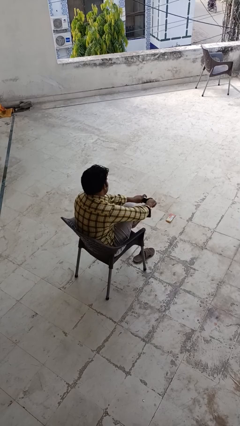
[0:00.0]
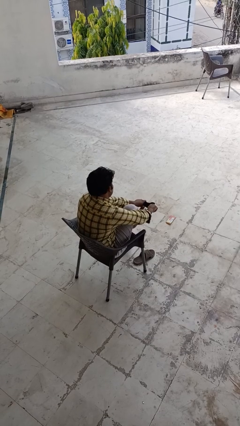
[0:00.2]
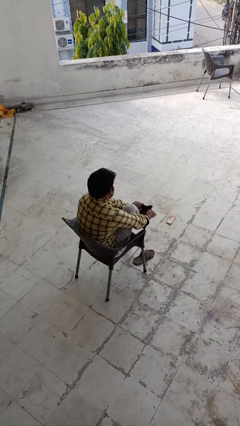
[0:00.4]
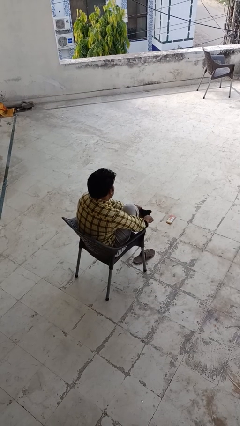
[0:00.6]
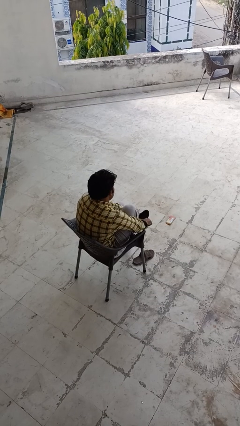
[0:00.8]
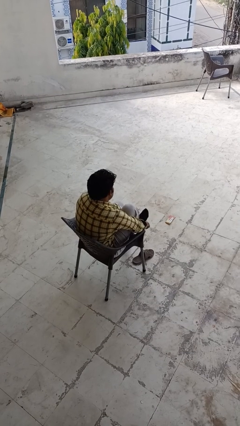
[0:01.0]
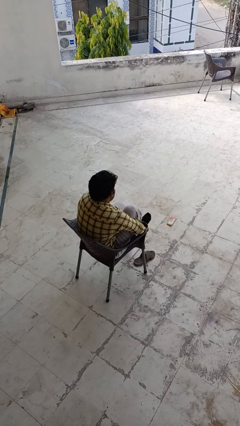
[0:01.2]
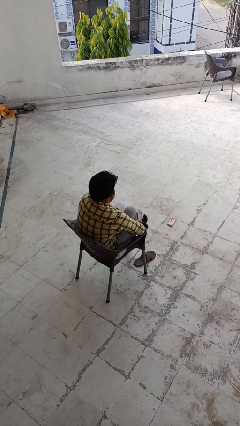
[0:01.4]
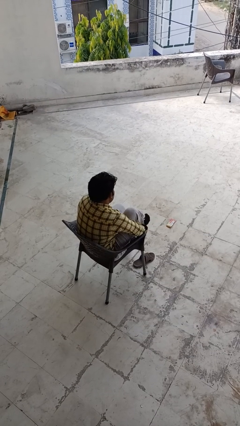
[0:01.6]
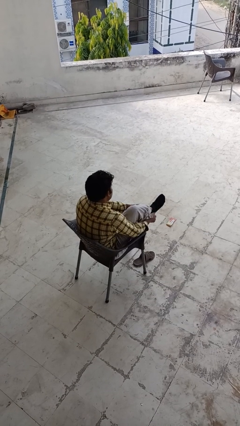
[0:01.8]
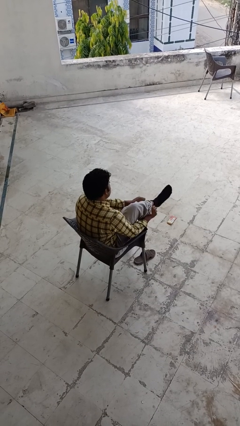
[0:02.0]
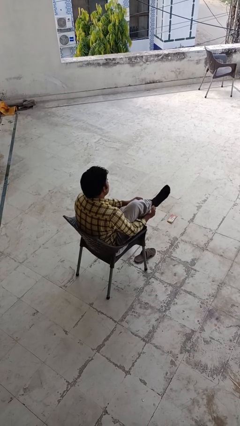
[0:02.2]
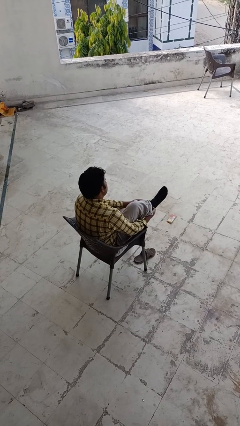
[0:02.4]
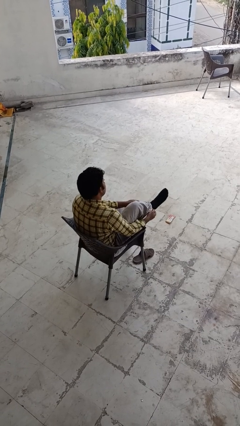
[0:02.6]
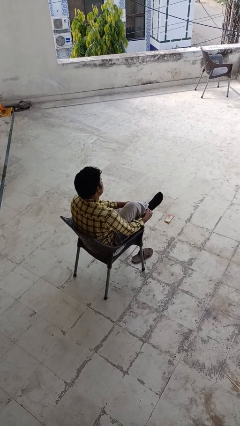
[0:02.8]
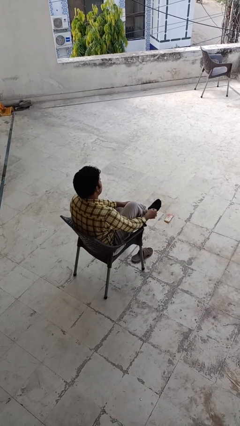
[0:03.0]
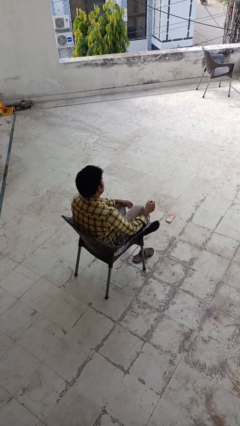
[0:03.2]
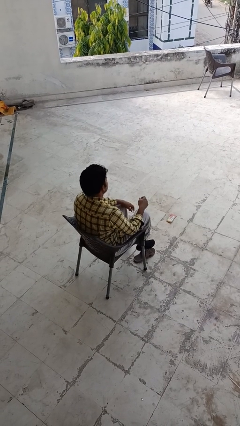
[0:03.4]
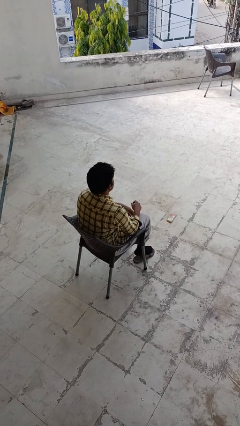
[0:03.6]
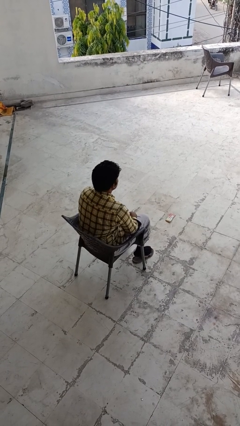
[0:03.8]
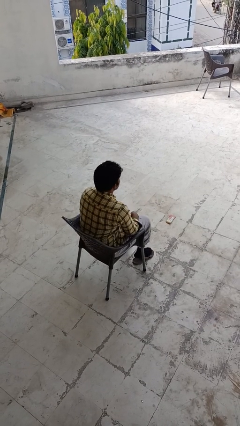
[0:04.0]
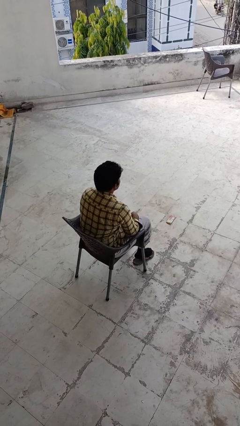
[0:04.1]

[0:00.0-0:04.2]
person puts on socks

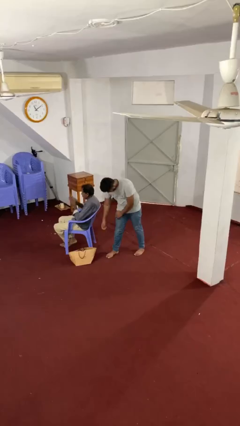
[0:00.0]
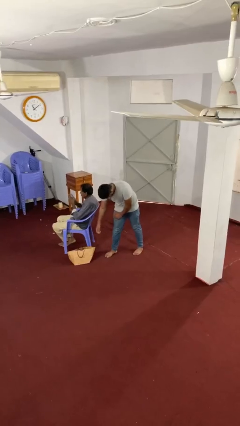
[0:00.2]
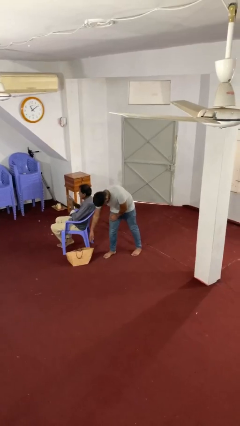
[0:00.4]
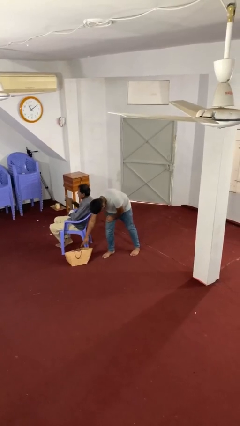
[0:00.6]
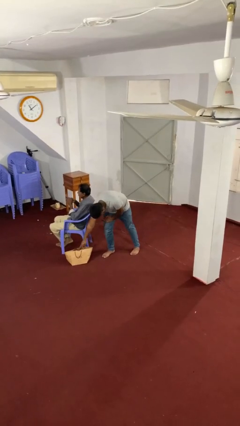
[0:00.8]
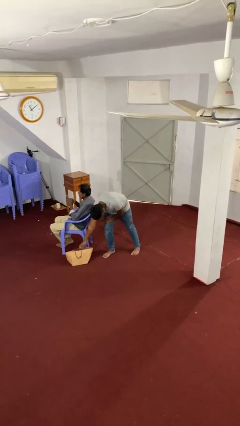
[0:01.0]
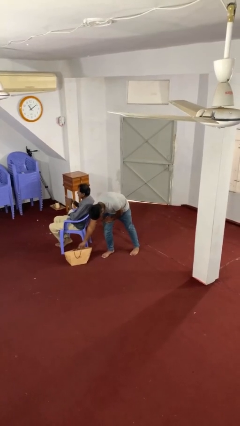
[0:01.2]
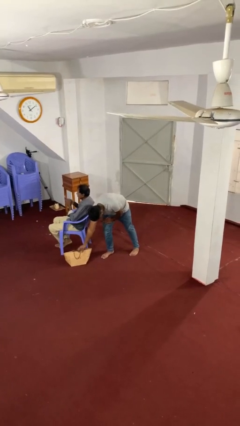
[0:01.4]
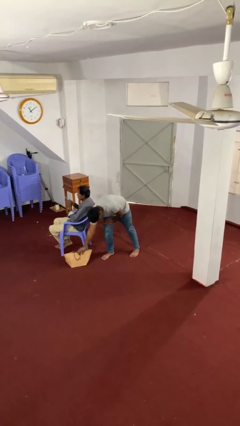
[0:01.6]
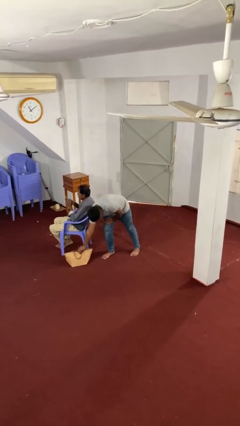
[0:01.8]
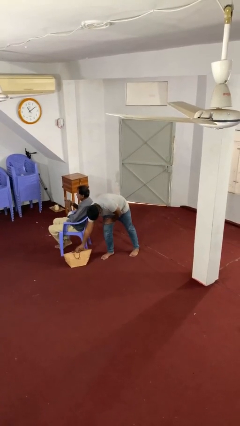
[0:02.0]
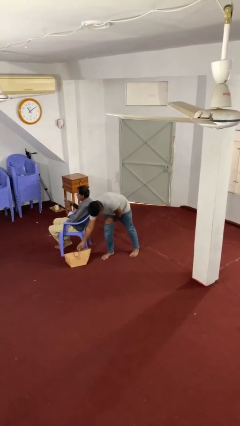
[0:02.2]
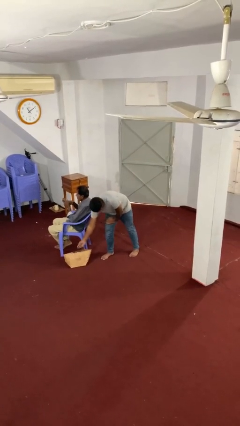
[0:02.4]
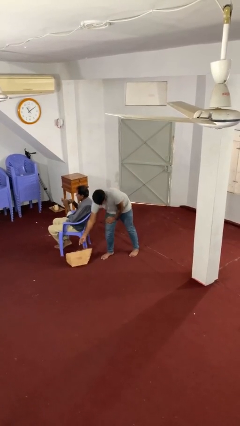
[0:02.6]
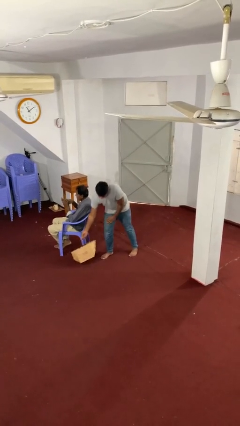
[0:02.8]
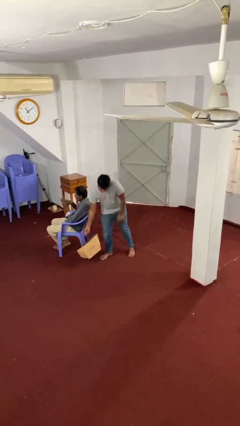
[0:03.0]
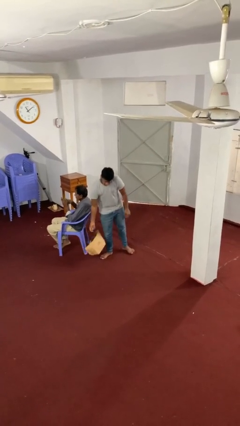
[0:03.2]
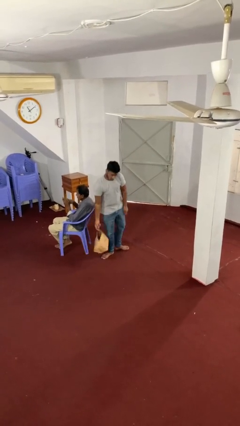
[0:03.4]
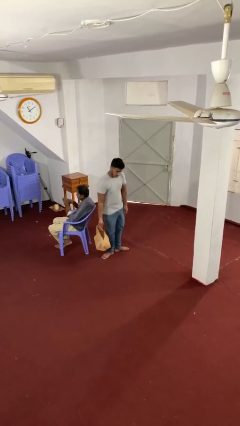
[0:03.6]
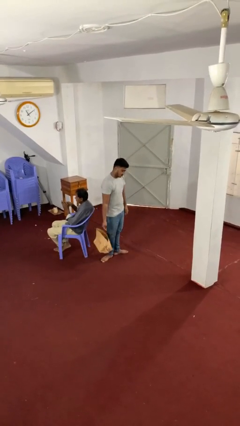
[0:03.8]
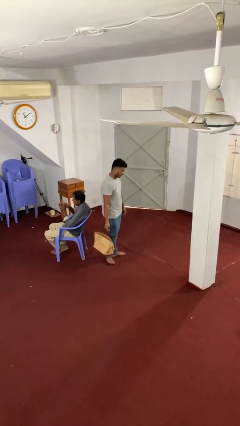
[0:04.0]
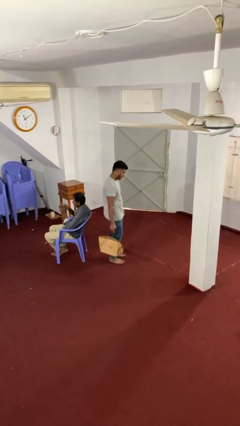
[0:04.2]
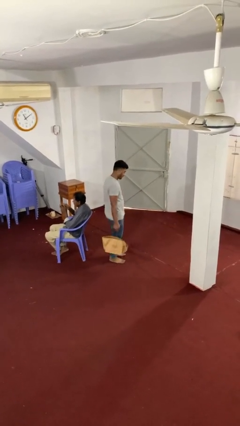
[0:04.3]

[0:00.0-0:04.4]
person steals object from person

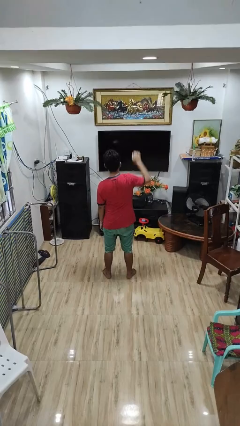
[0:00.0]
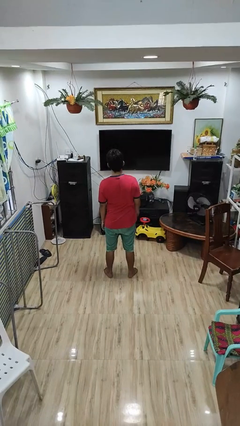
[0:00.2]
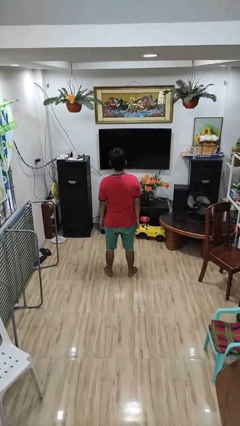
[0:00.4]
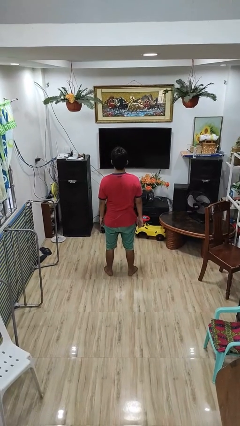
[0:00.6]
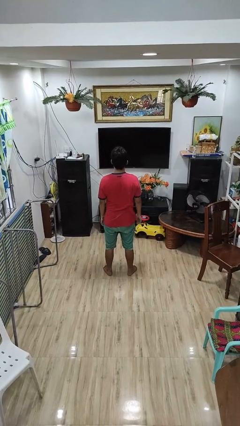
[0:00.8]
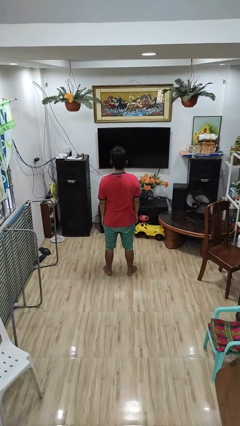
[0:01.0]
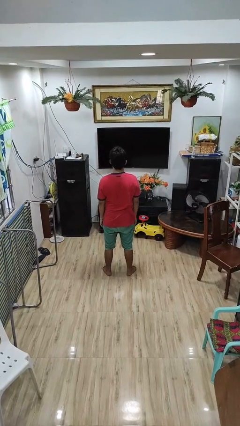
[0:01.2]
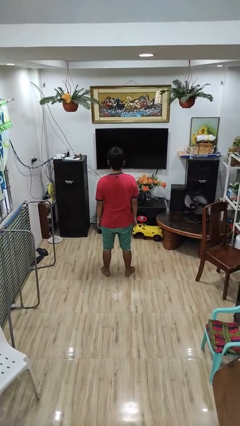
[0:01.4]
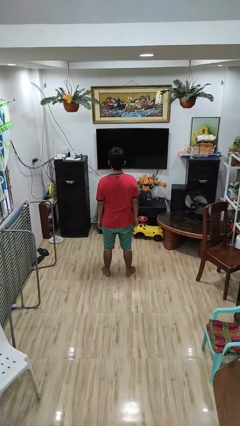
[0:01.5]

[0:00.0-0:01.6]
person gestures lower hand

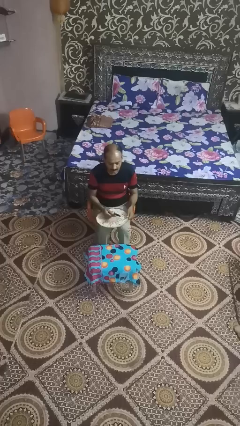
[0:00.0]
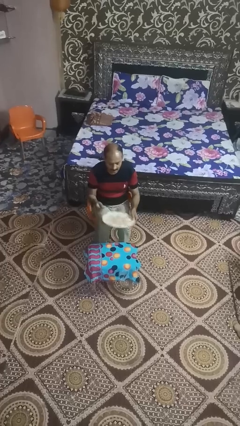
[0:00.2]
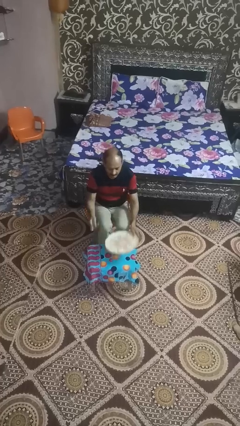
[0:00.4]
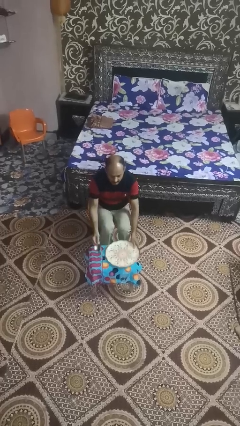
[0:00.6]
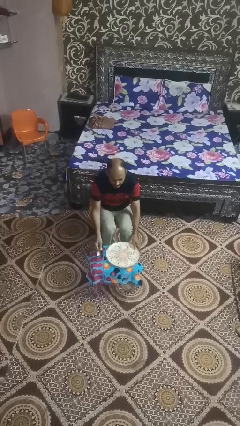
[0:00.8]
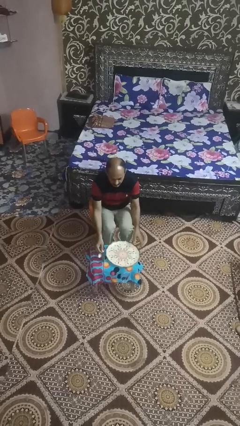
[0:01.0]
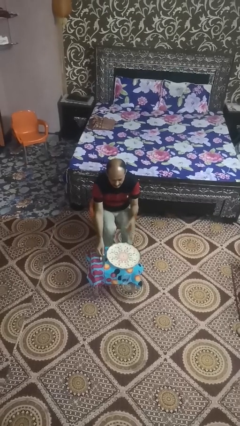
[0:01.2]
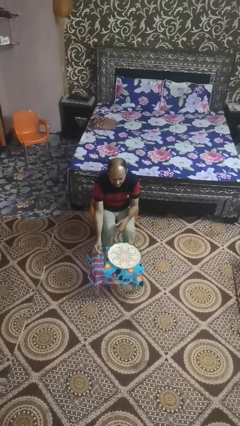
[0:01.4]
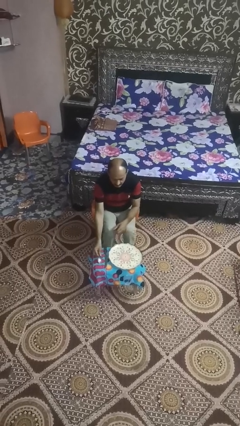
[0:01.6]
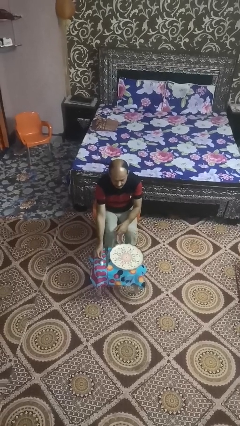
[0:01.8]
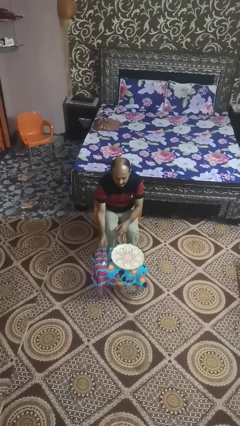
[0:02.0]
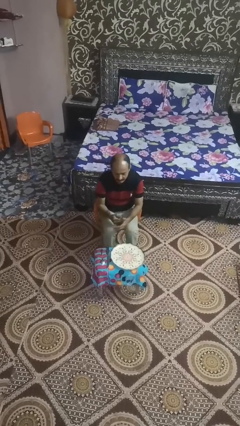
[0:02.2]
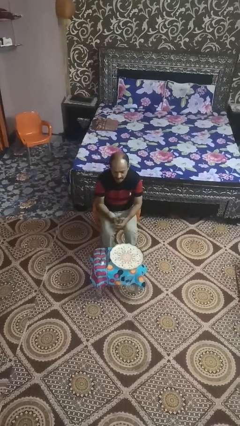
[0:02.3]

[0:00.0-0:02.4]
person sets table

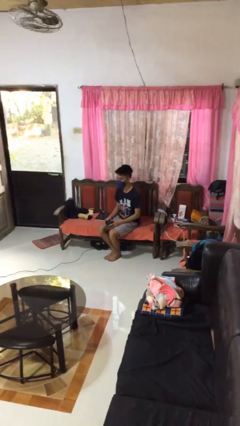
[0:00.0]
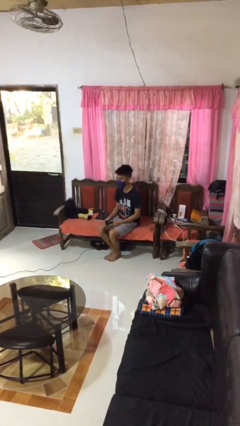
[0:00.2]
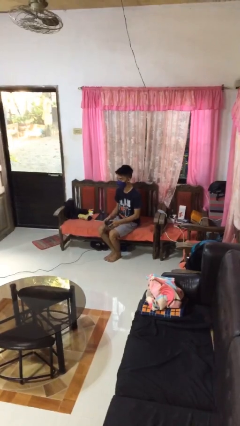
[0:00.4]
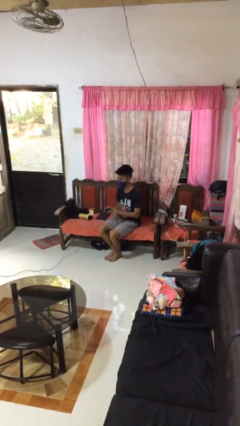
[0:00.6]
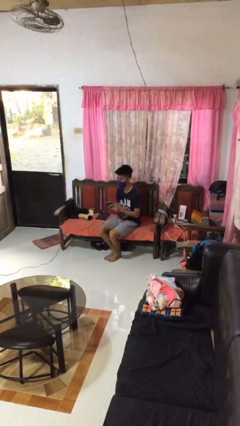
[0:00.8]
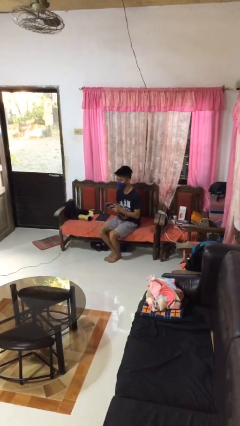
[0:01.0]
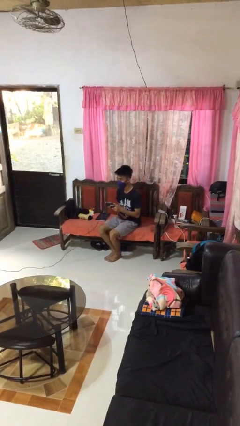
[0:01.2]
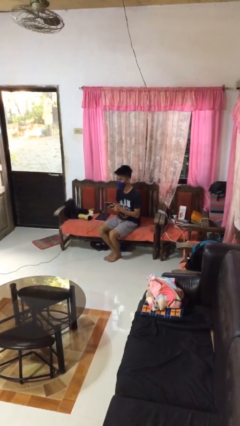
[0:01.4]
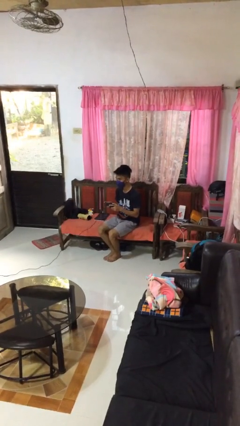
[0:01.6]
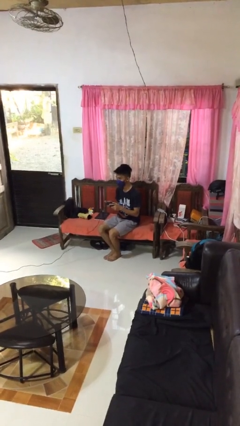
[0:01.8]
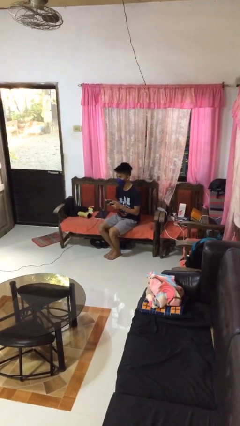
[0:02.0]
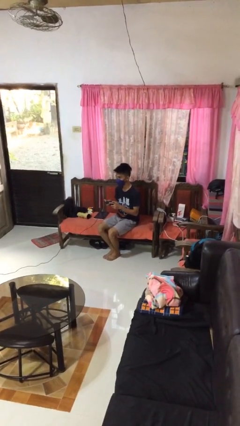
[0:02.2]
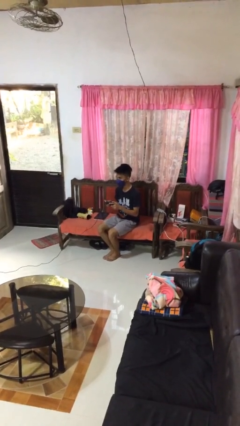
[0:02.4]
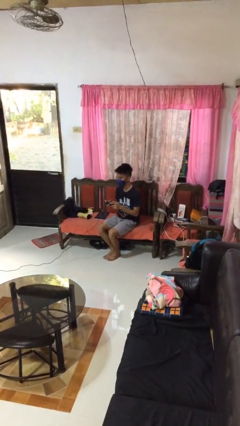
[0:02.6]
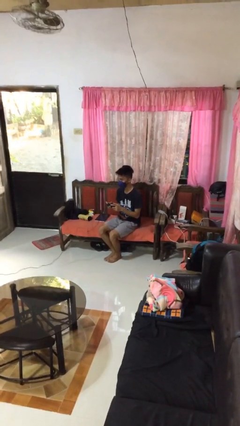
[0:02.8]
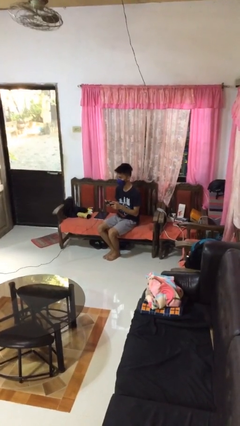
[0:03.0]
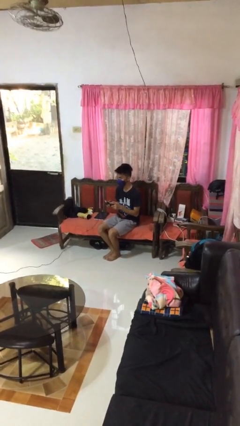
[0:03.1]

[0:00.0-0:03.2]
person interacts with handheld game

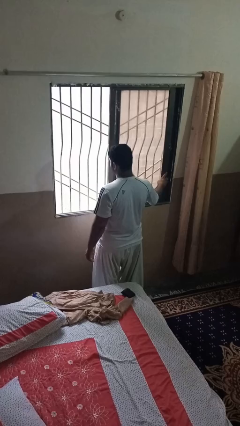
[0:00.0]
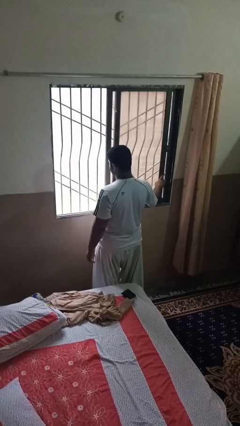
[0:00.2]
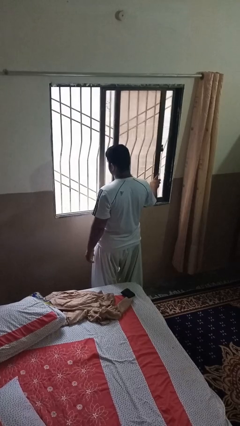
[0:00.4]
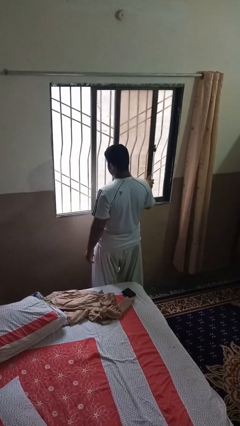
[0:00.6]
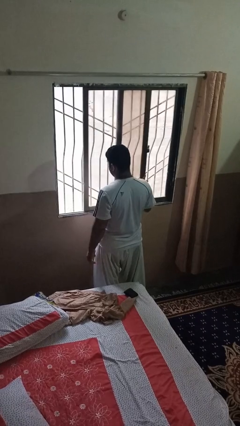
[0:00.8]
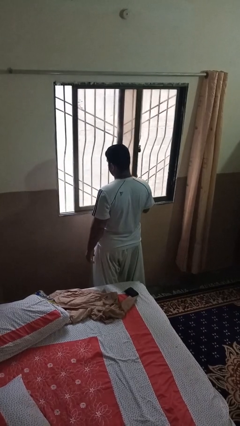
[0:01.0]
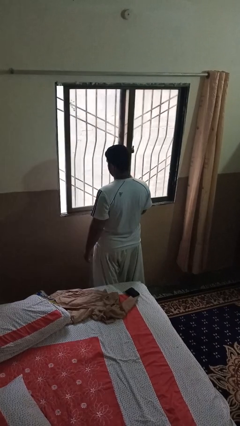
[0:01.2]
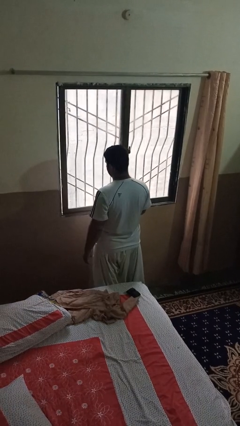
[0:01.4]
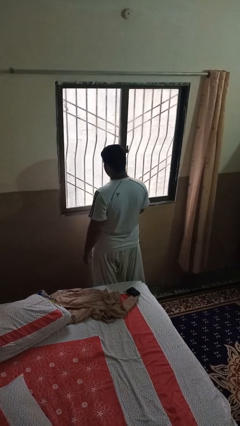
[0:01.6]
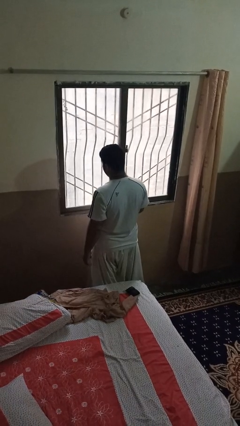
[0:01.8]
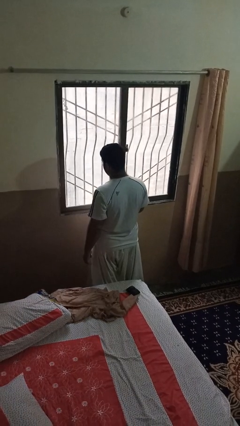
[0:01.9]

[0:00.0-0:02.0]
person closes home window
